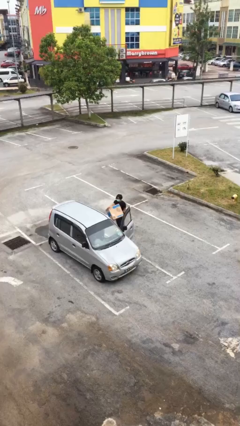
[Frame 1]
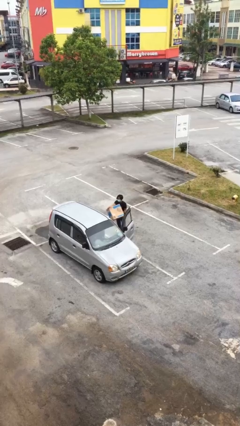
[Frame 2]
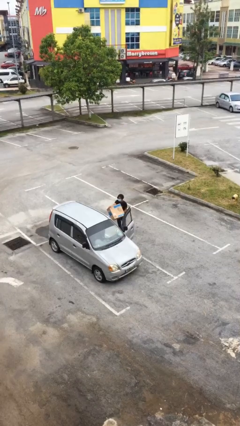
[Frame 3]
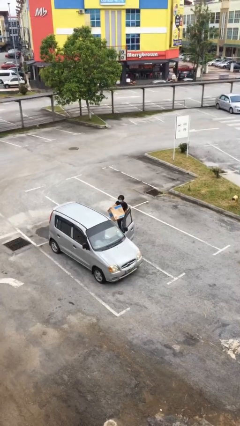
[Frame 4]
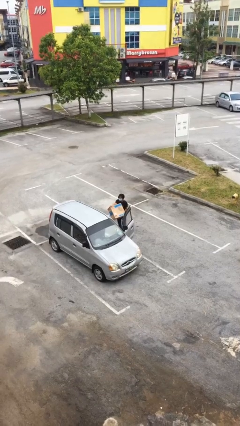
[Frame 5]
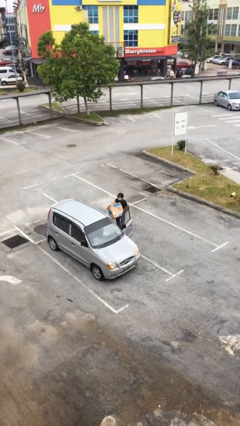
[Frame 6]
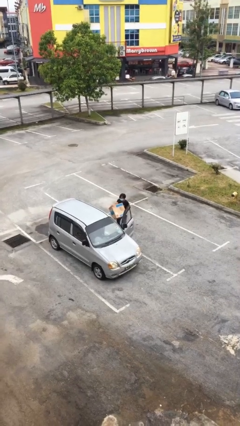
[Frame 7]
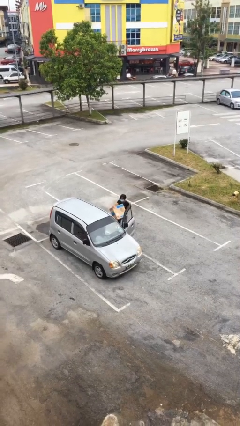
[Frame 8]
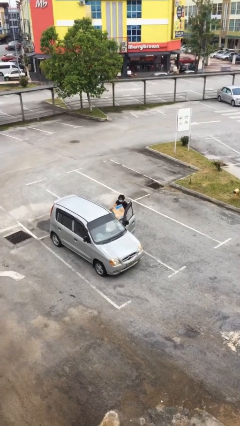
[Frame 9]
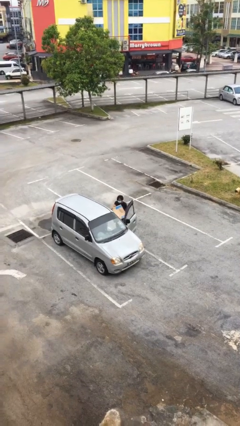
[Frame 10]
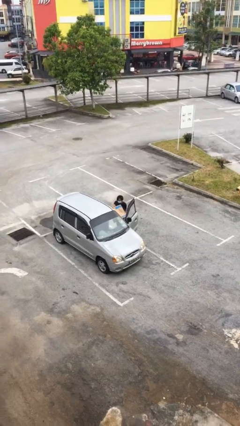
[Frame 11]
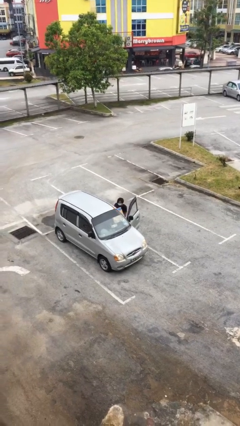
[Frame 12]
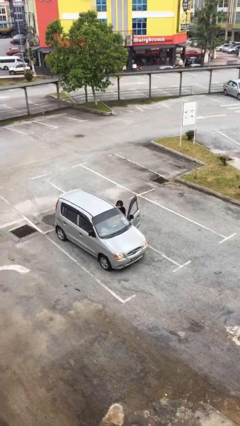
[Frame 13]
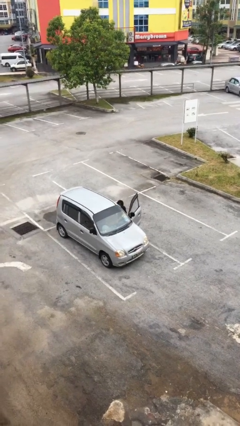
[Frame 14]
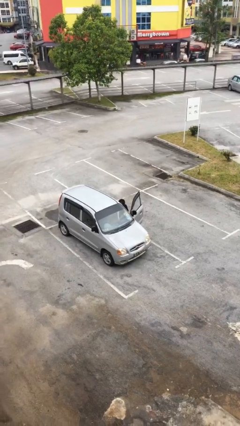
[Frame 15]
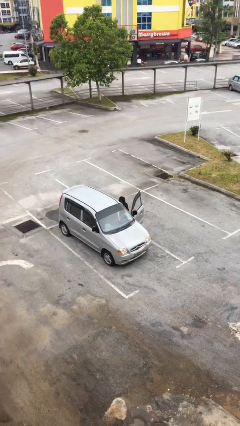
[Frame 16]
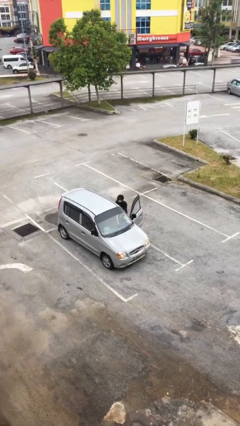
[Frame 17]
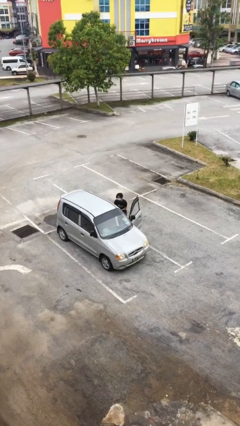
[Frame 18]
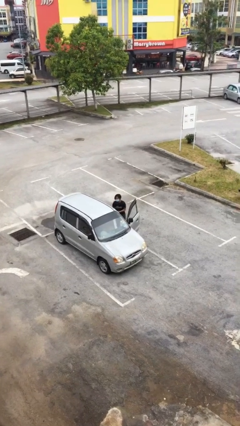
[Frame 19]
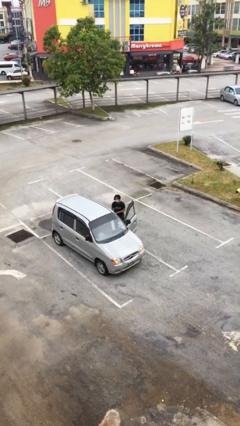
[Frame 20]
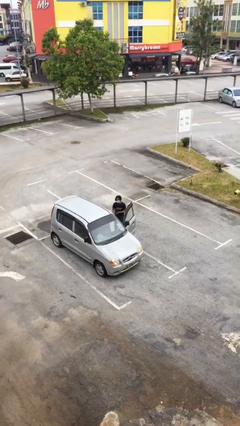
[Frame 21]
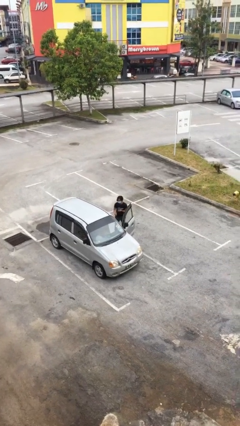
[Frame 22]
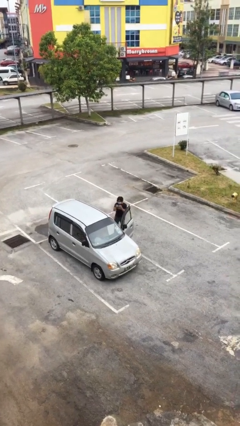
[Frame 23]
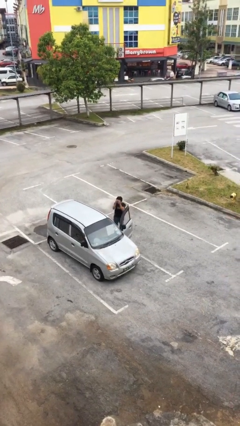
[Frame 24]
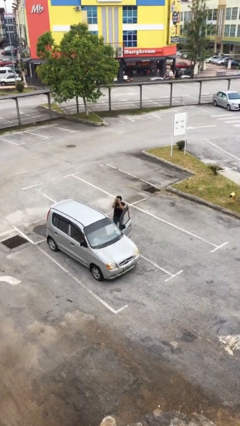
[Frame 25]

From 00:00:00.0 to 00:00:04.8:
person loads car

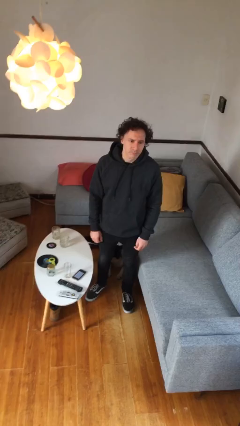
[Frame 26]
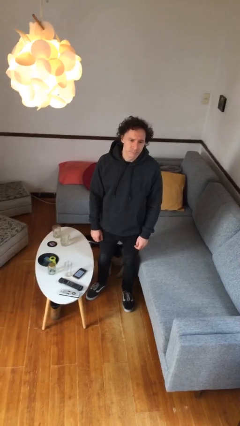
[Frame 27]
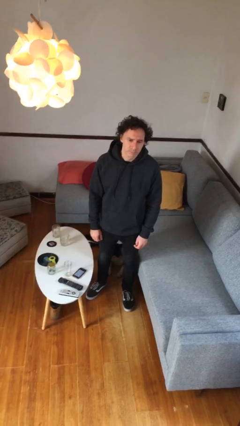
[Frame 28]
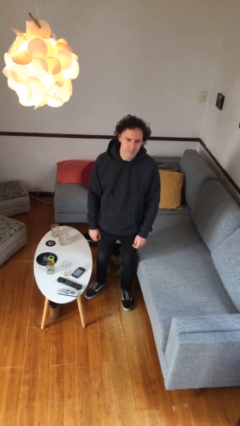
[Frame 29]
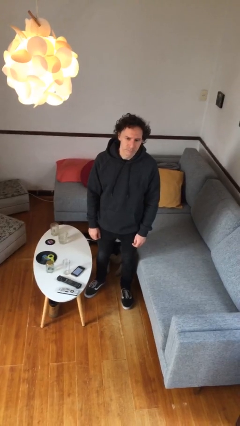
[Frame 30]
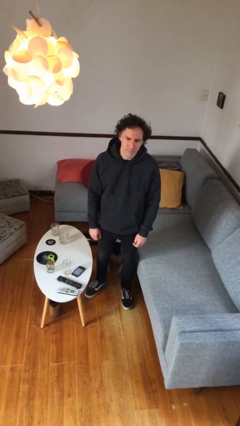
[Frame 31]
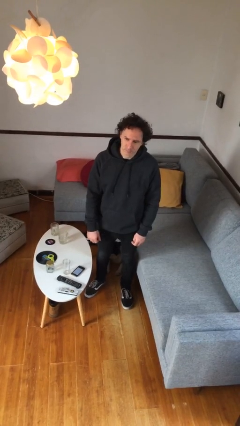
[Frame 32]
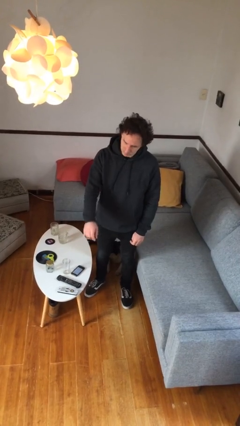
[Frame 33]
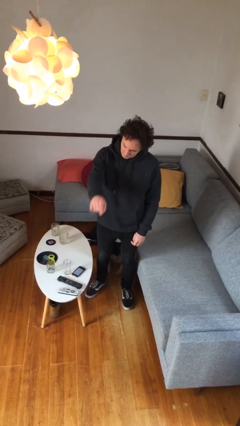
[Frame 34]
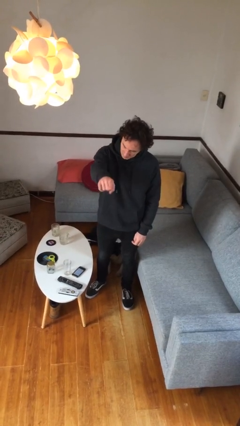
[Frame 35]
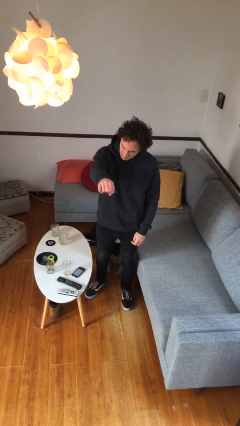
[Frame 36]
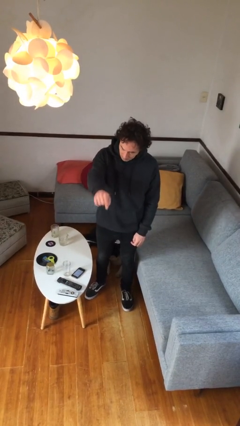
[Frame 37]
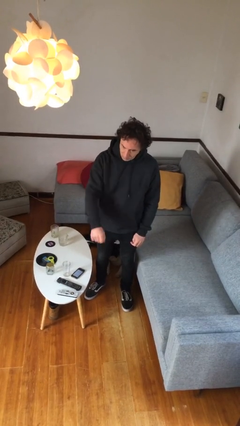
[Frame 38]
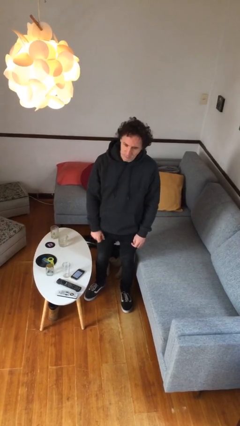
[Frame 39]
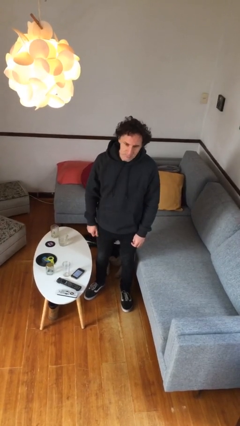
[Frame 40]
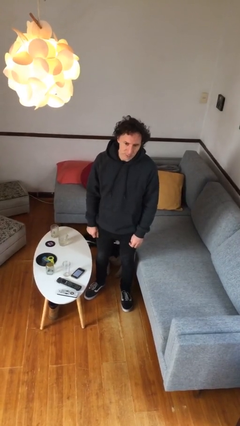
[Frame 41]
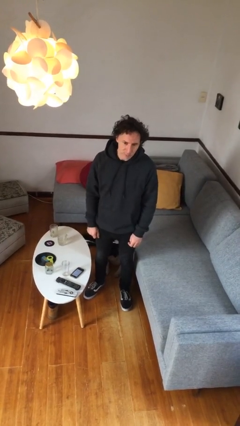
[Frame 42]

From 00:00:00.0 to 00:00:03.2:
person points at person

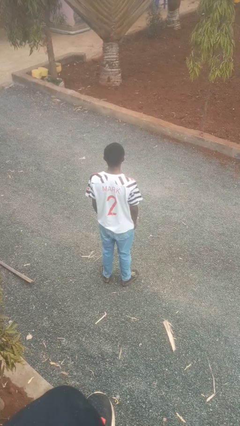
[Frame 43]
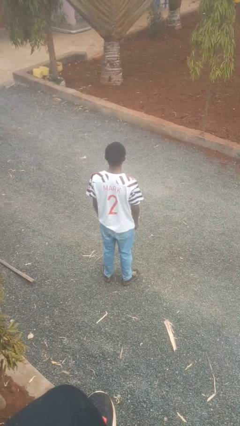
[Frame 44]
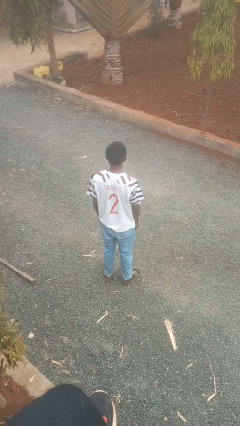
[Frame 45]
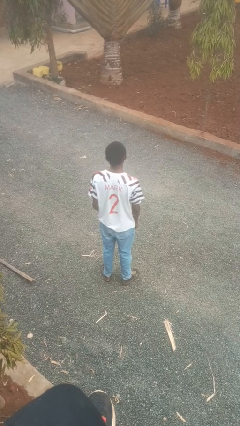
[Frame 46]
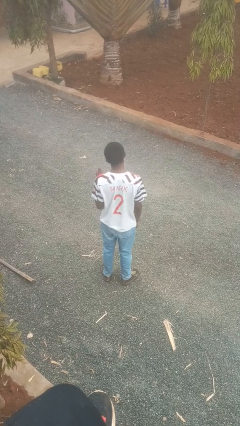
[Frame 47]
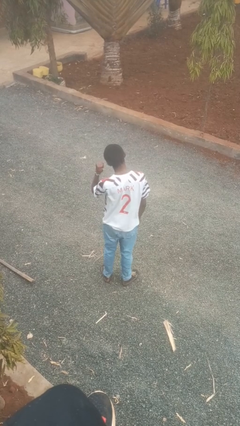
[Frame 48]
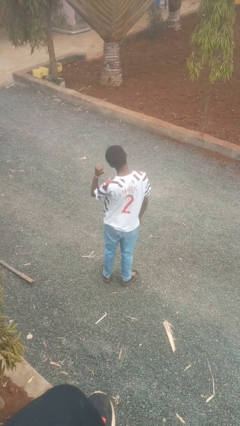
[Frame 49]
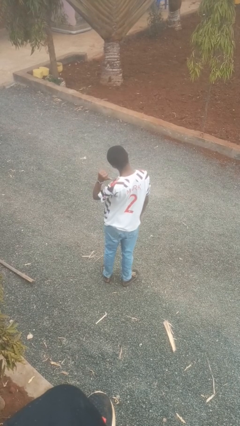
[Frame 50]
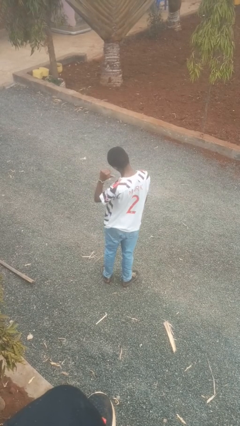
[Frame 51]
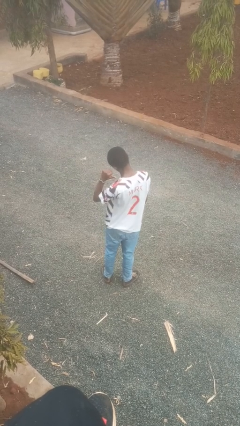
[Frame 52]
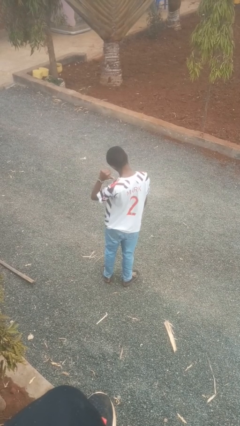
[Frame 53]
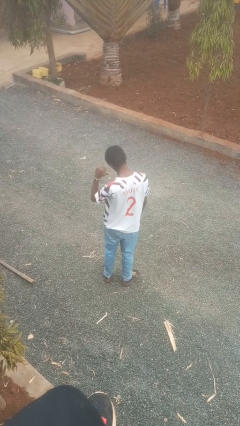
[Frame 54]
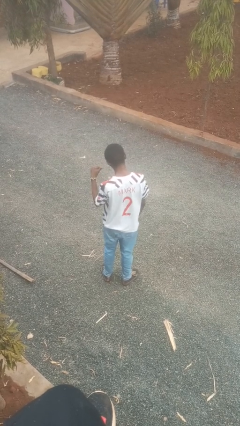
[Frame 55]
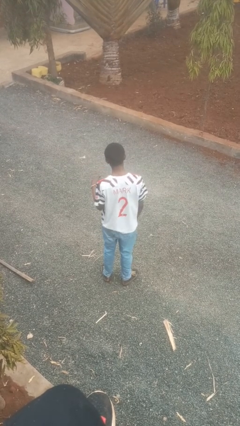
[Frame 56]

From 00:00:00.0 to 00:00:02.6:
person gestures behind me

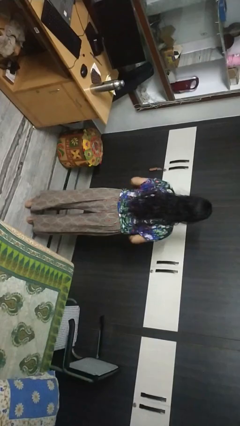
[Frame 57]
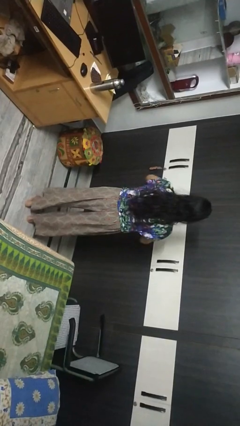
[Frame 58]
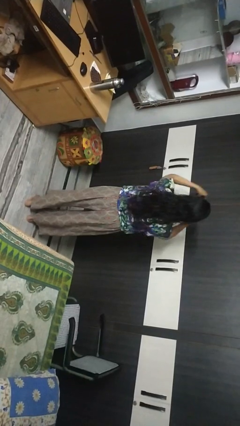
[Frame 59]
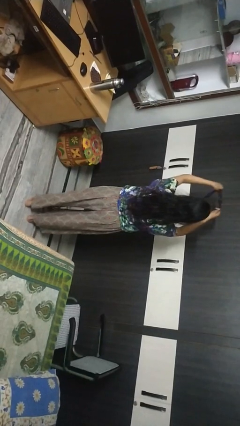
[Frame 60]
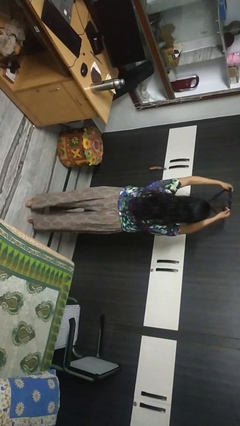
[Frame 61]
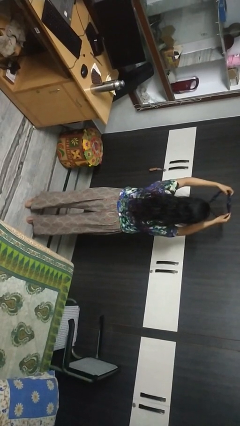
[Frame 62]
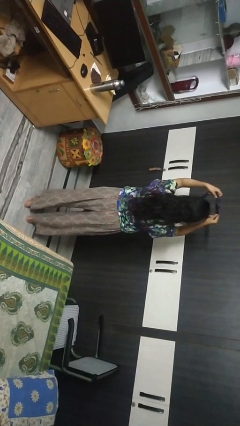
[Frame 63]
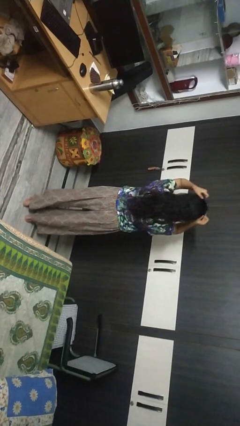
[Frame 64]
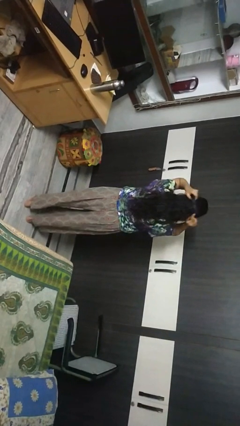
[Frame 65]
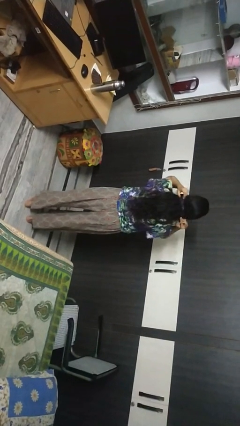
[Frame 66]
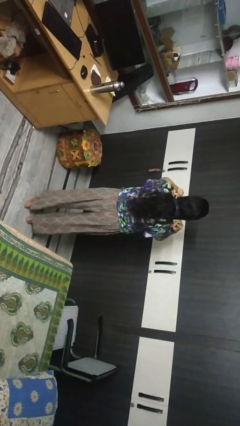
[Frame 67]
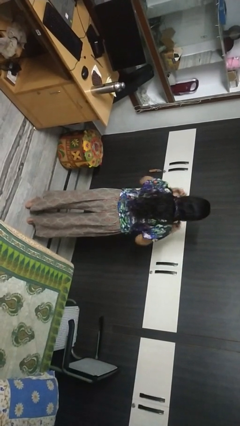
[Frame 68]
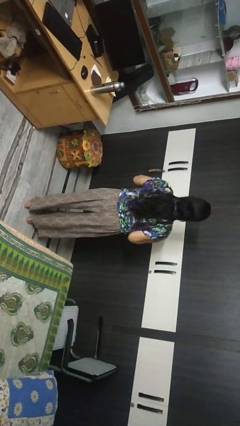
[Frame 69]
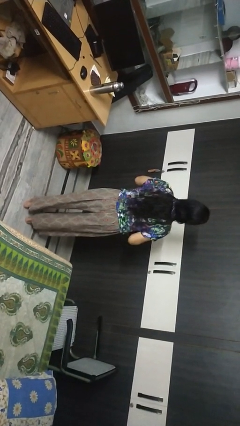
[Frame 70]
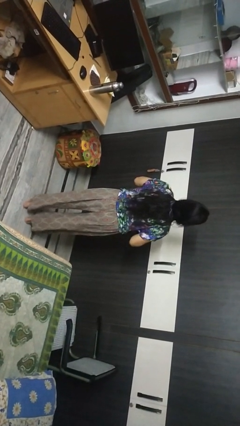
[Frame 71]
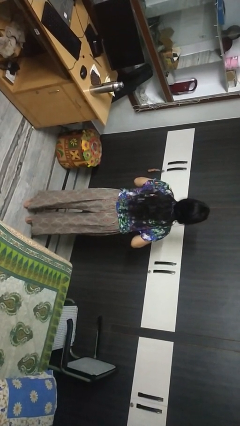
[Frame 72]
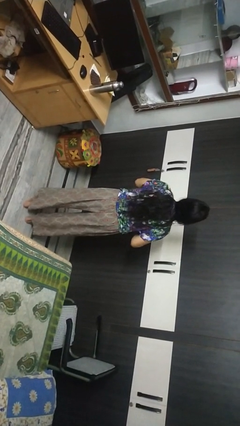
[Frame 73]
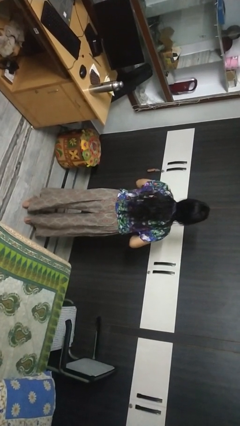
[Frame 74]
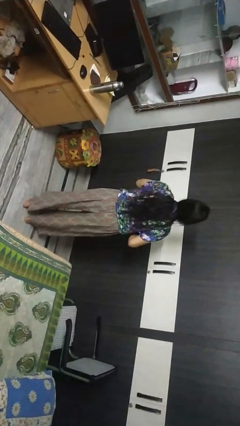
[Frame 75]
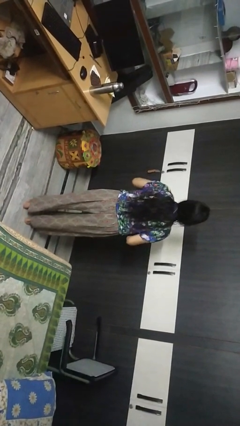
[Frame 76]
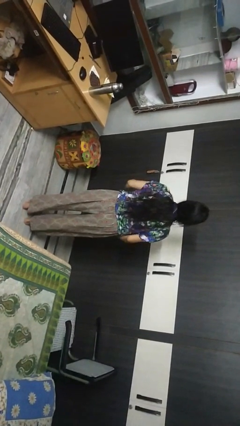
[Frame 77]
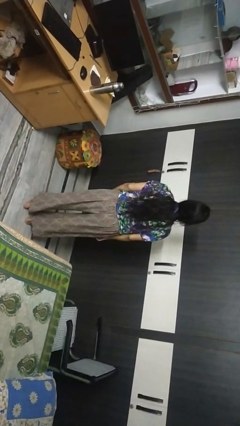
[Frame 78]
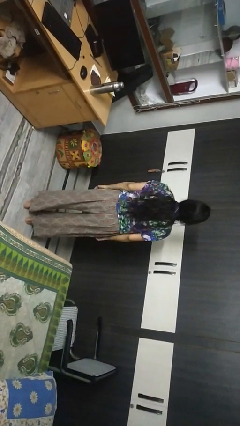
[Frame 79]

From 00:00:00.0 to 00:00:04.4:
person puts on necktie

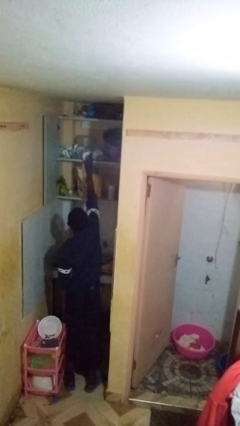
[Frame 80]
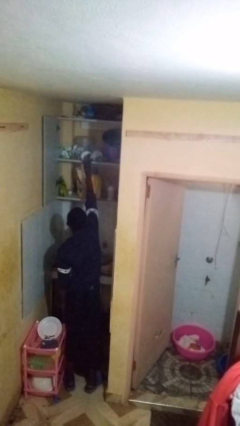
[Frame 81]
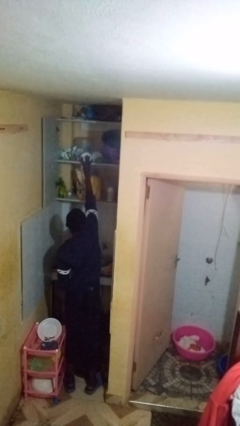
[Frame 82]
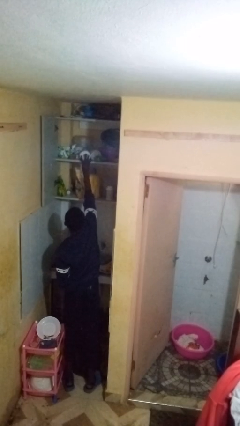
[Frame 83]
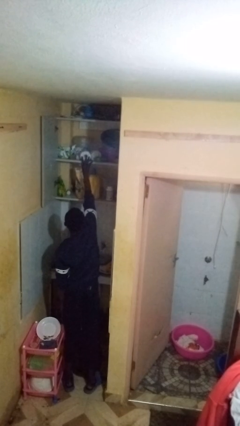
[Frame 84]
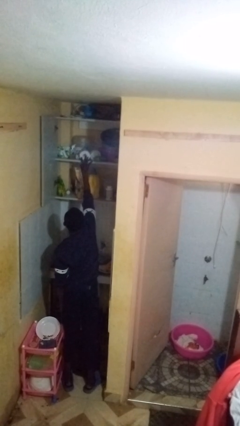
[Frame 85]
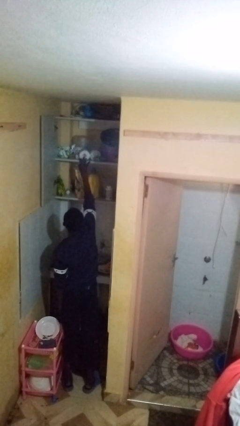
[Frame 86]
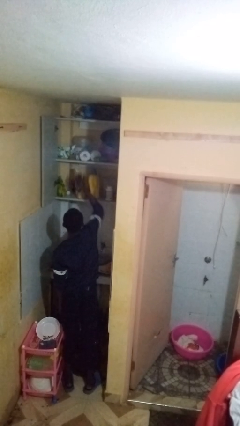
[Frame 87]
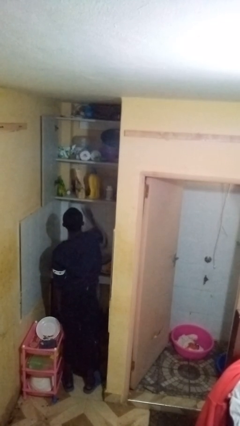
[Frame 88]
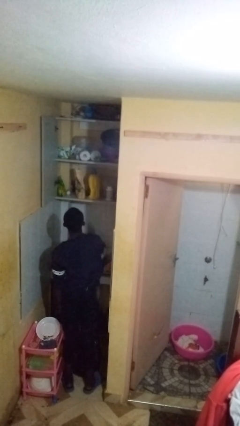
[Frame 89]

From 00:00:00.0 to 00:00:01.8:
person puts object in cabinet

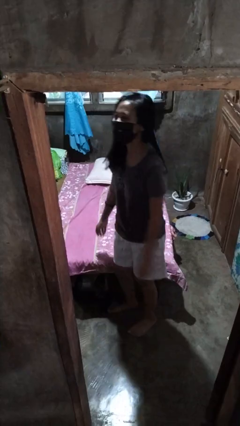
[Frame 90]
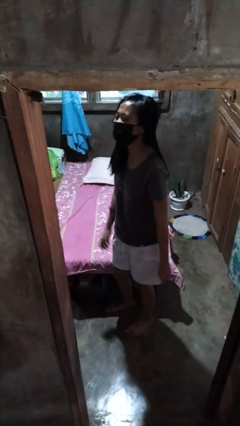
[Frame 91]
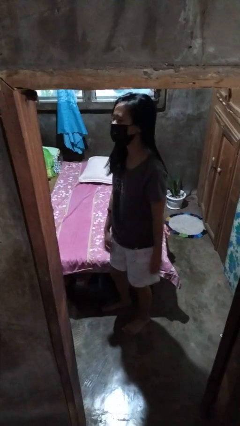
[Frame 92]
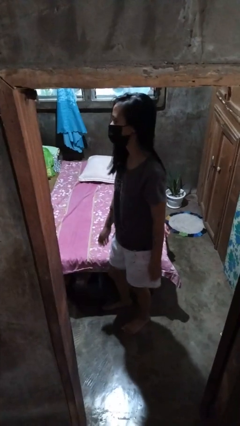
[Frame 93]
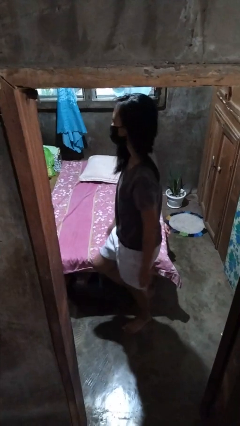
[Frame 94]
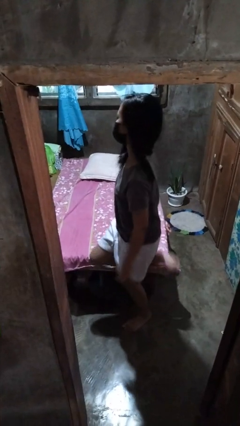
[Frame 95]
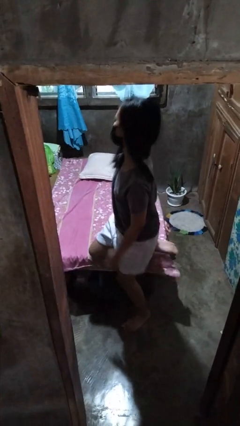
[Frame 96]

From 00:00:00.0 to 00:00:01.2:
person lies down on bed
